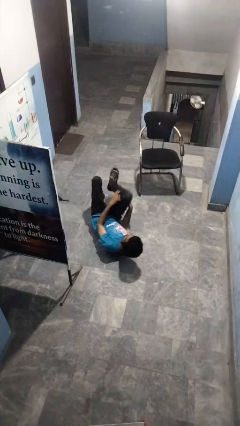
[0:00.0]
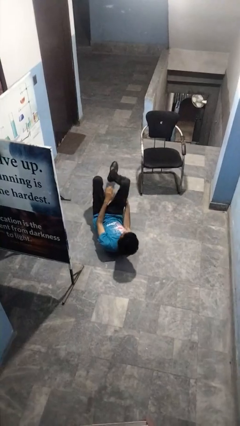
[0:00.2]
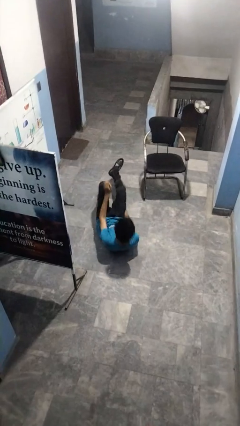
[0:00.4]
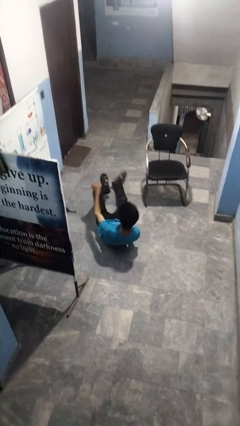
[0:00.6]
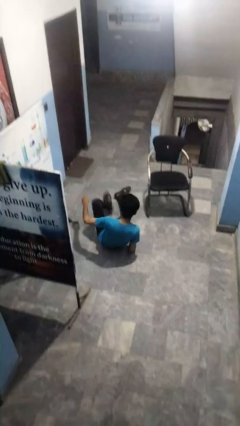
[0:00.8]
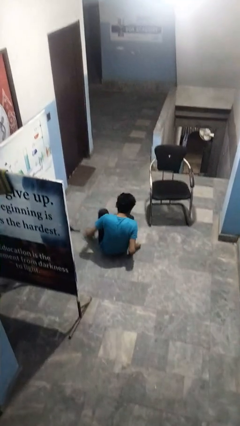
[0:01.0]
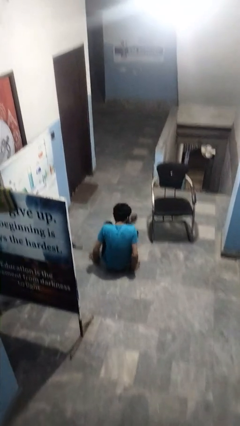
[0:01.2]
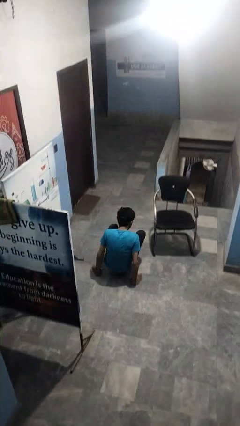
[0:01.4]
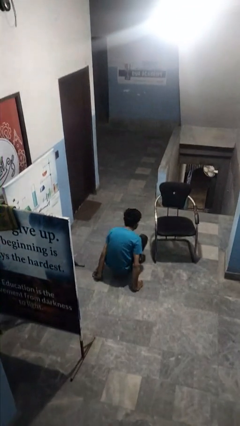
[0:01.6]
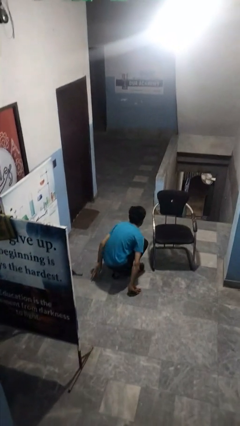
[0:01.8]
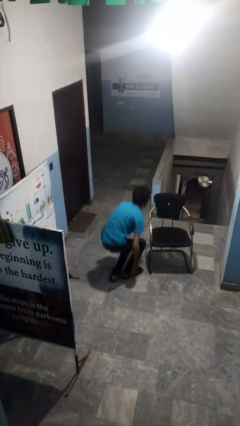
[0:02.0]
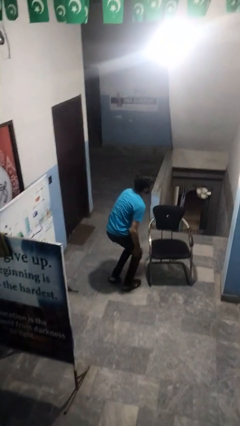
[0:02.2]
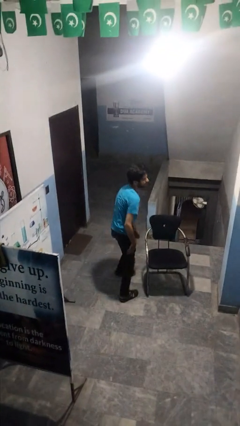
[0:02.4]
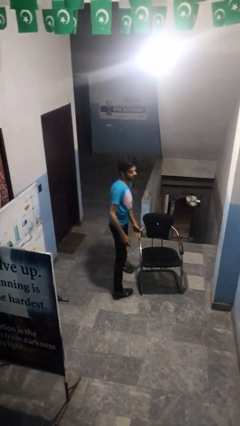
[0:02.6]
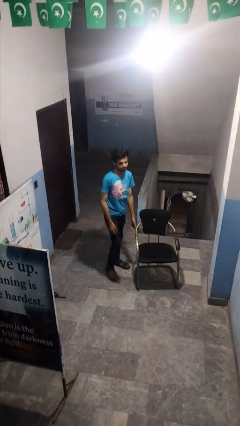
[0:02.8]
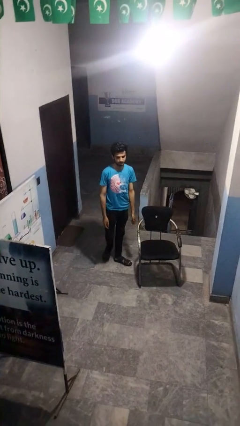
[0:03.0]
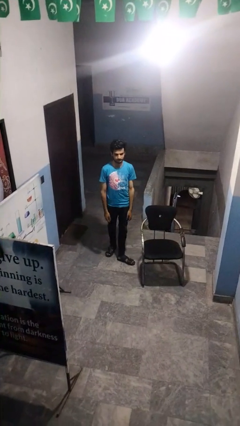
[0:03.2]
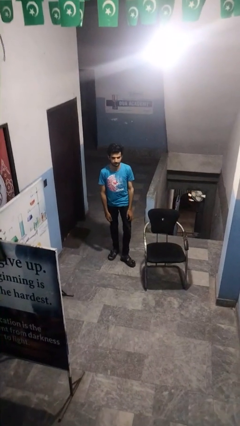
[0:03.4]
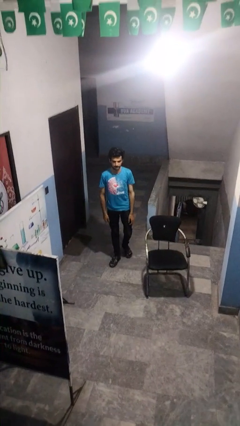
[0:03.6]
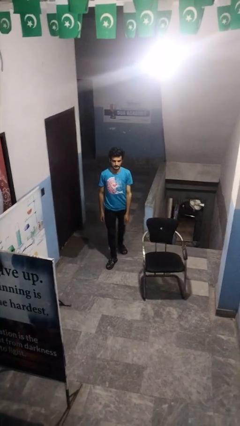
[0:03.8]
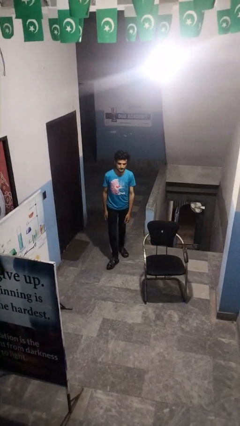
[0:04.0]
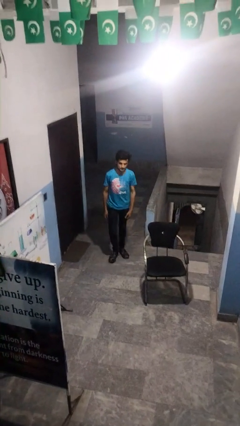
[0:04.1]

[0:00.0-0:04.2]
person stands up from floor

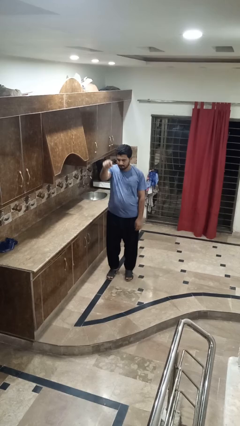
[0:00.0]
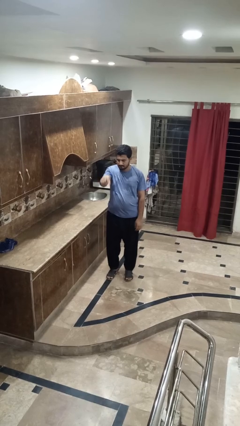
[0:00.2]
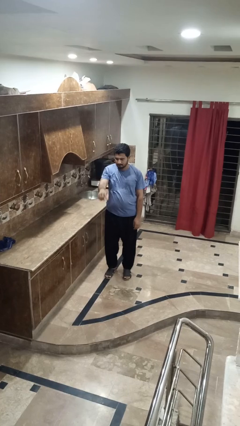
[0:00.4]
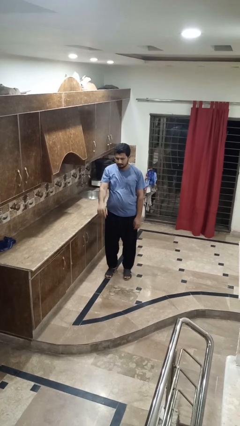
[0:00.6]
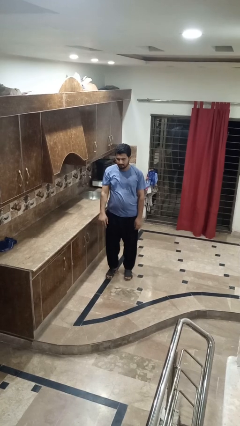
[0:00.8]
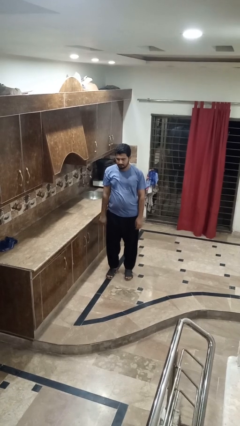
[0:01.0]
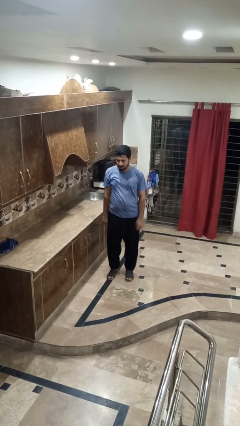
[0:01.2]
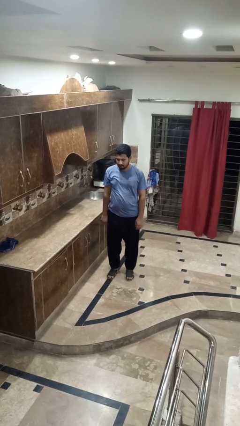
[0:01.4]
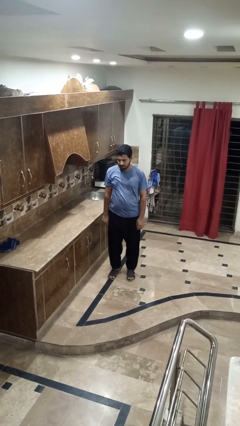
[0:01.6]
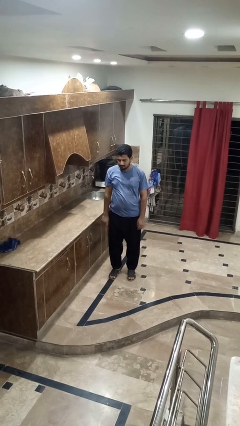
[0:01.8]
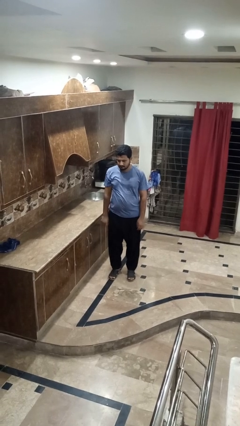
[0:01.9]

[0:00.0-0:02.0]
person gestures swipe down

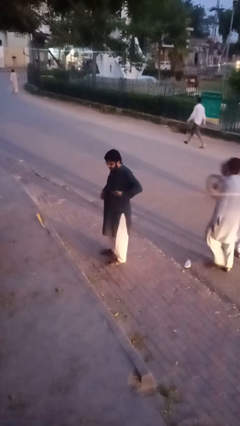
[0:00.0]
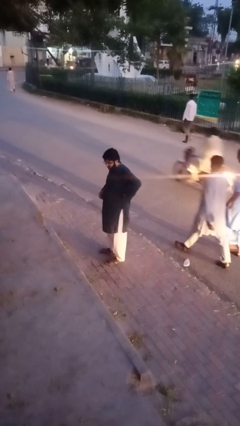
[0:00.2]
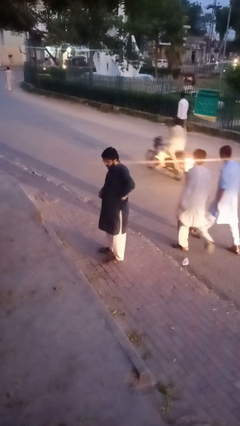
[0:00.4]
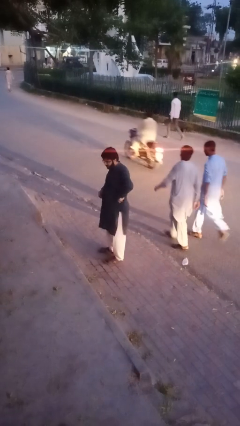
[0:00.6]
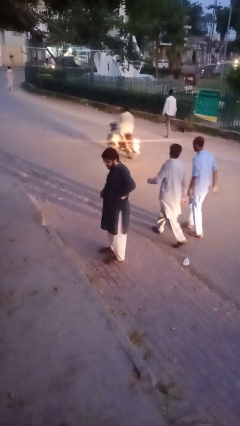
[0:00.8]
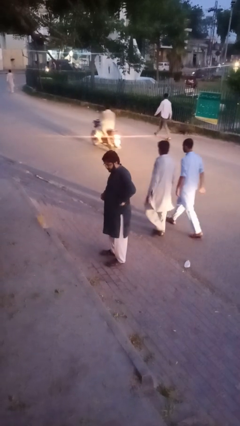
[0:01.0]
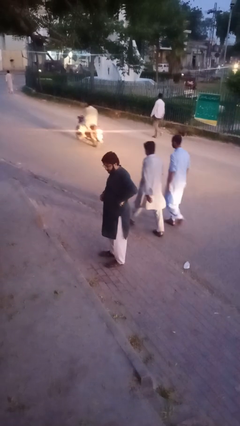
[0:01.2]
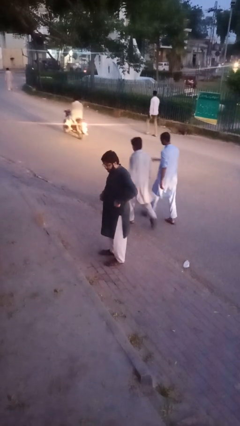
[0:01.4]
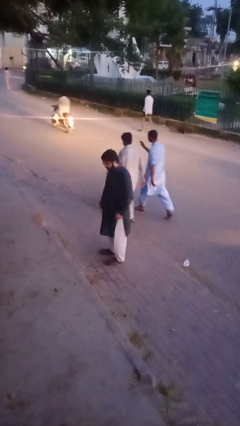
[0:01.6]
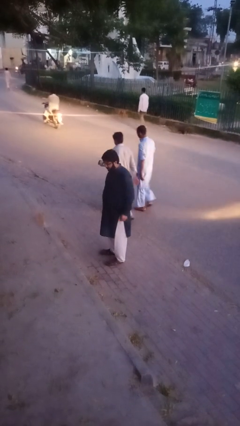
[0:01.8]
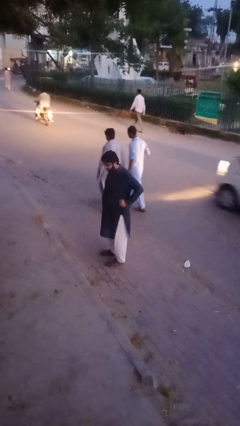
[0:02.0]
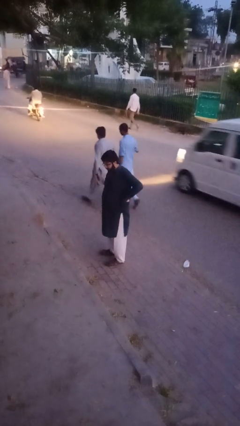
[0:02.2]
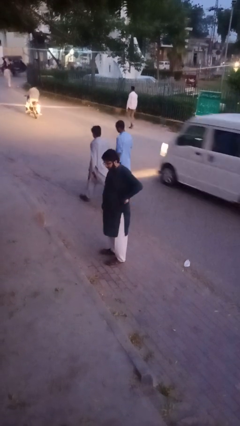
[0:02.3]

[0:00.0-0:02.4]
person puts phone into pocket

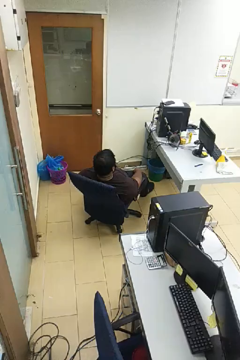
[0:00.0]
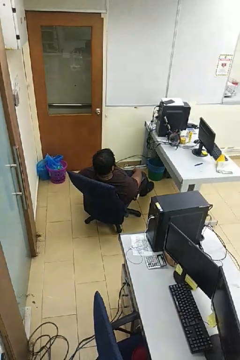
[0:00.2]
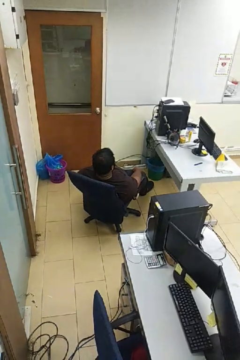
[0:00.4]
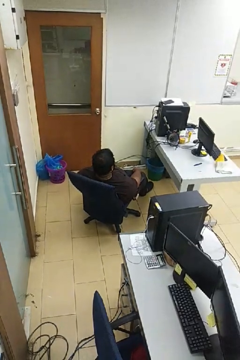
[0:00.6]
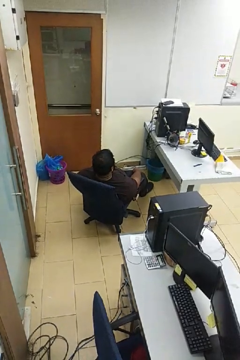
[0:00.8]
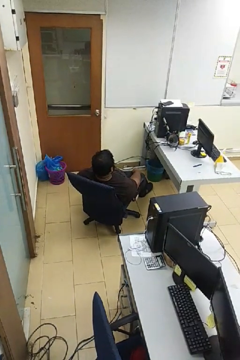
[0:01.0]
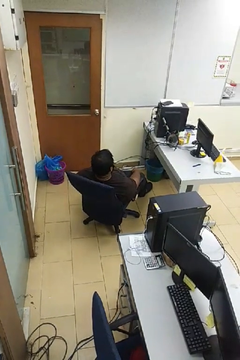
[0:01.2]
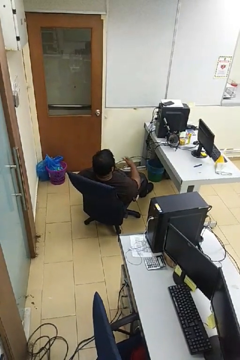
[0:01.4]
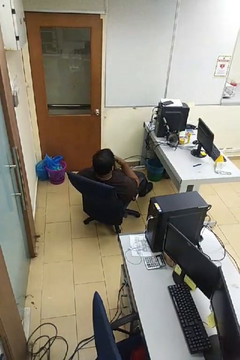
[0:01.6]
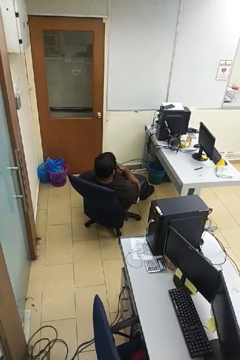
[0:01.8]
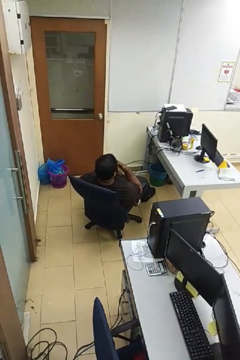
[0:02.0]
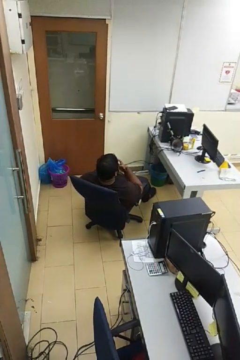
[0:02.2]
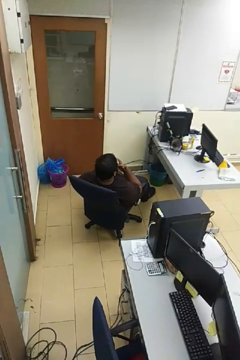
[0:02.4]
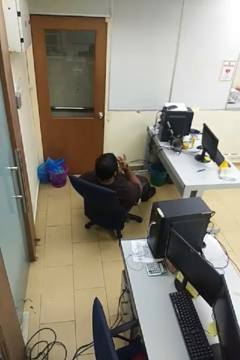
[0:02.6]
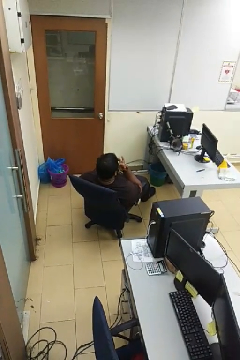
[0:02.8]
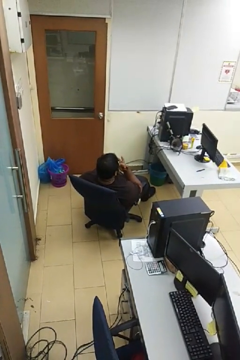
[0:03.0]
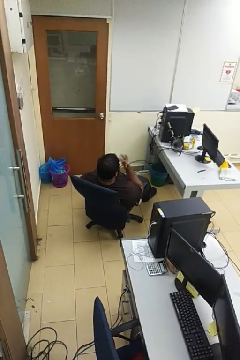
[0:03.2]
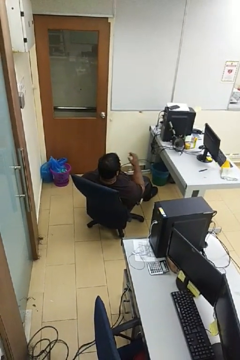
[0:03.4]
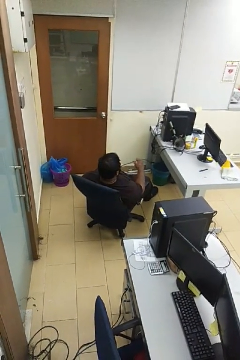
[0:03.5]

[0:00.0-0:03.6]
person licks fingers

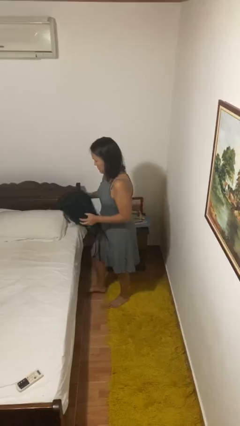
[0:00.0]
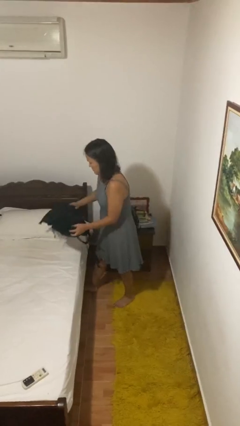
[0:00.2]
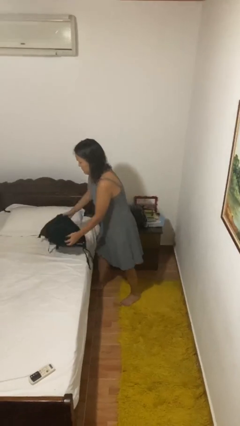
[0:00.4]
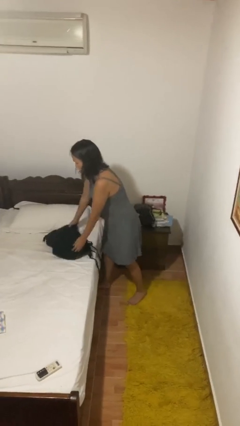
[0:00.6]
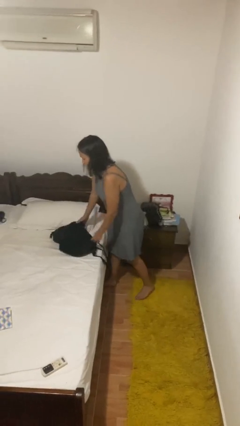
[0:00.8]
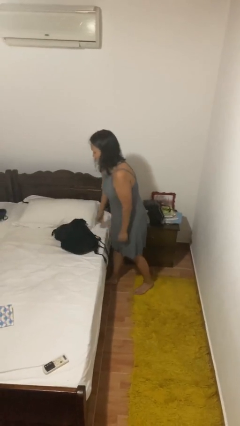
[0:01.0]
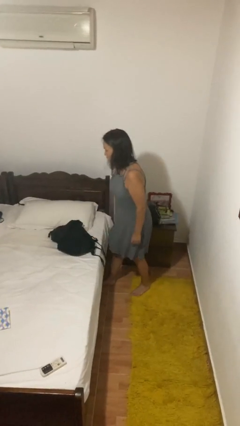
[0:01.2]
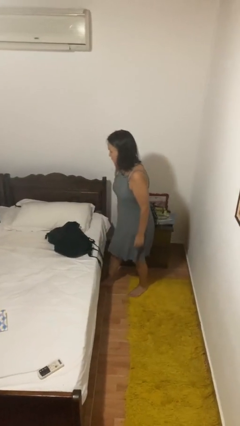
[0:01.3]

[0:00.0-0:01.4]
person puts down object on bed

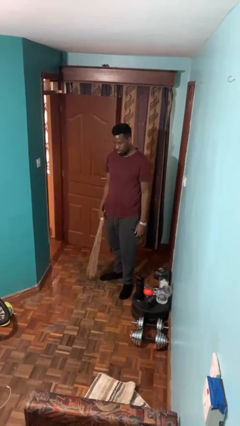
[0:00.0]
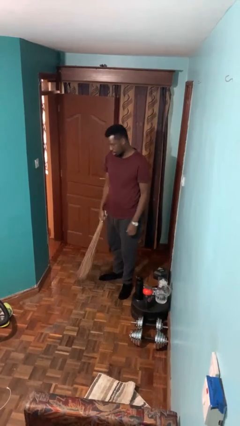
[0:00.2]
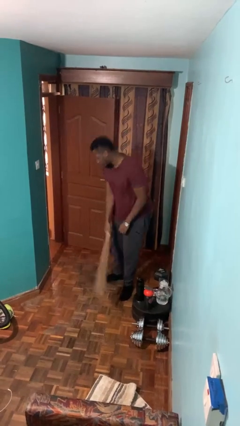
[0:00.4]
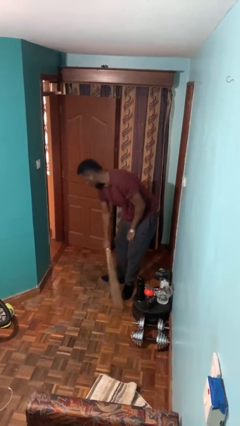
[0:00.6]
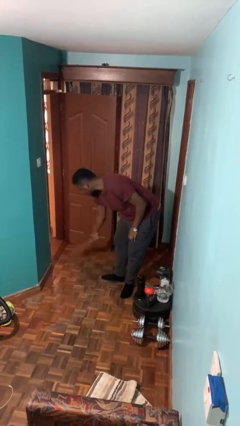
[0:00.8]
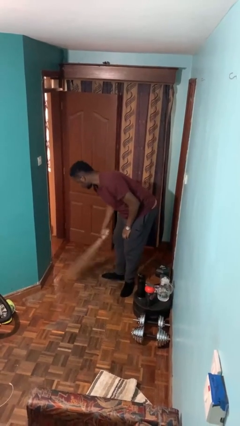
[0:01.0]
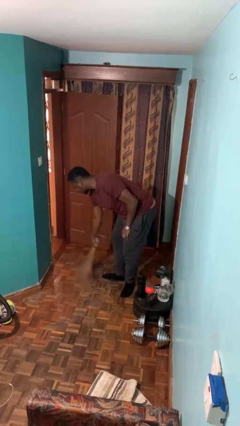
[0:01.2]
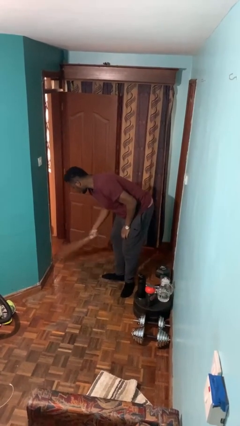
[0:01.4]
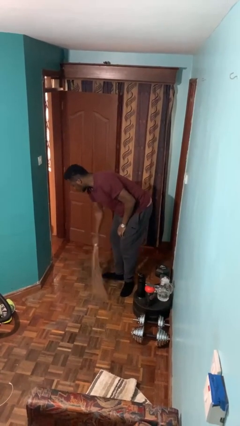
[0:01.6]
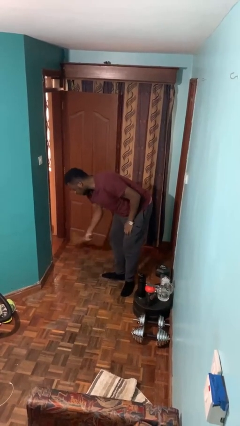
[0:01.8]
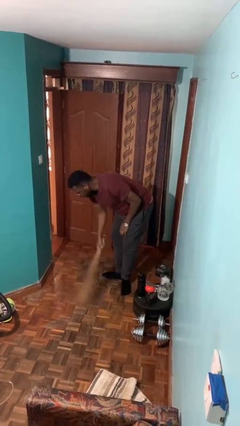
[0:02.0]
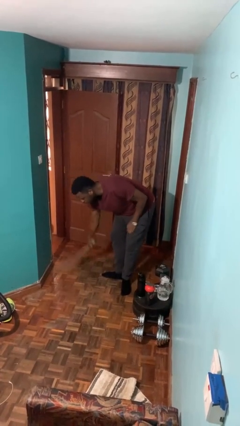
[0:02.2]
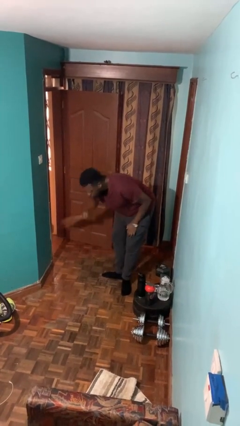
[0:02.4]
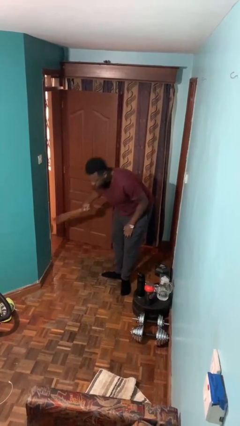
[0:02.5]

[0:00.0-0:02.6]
person sweeps floor

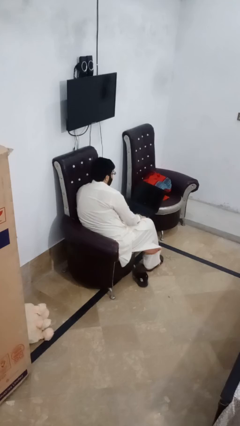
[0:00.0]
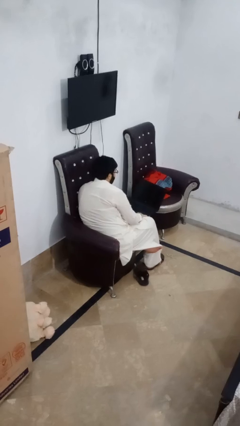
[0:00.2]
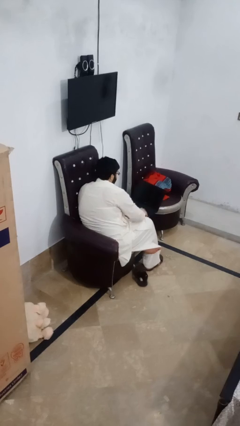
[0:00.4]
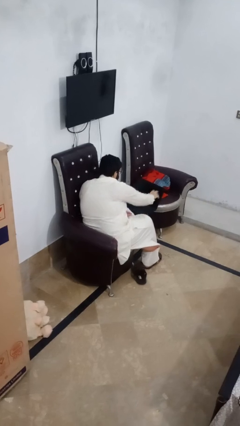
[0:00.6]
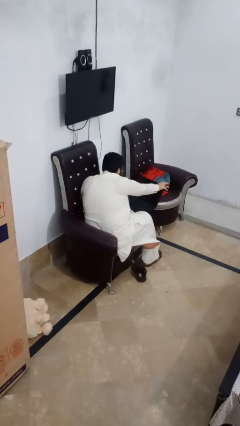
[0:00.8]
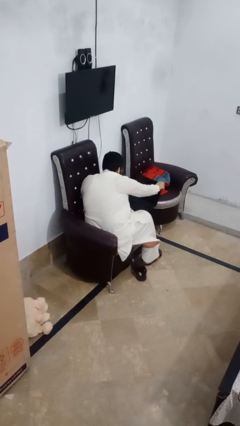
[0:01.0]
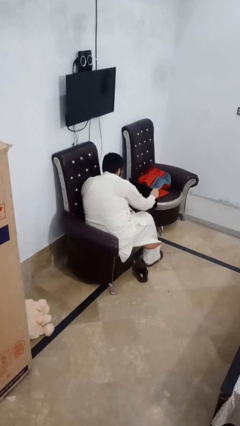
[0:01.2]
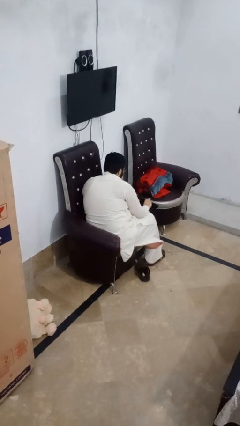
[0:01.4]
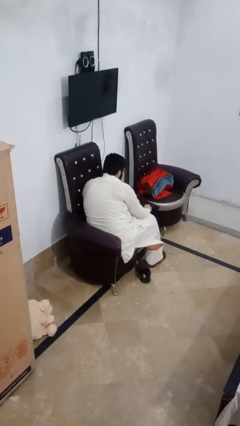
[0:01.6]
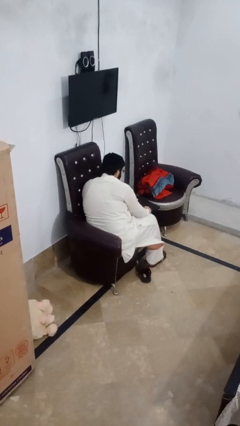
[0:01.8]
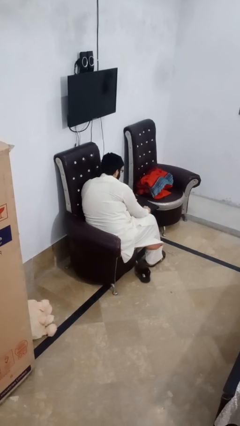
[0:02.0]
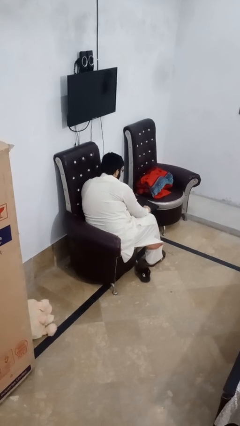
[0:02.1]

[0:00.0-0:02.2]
person closes laptop
